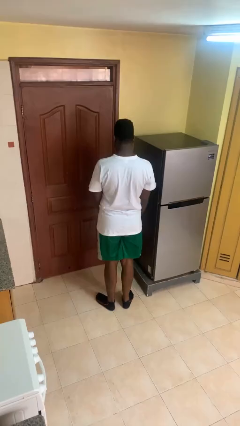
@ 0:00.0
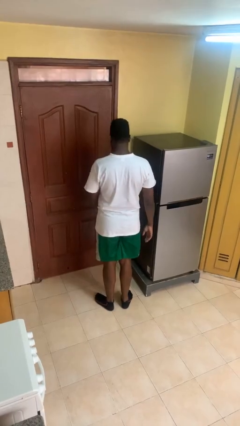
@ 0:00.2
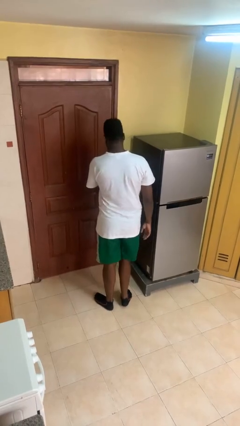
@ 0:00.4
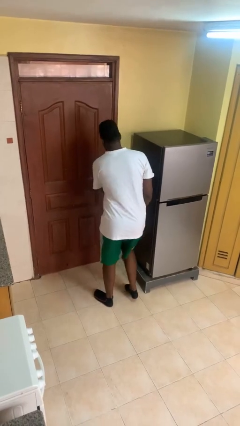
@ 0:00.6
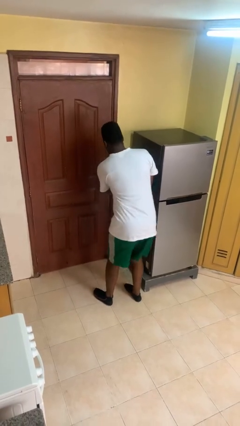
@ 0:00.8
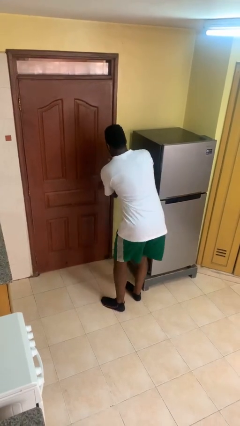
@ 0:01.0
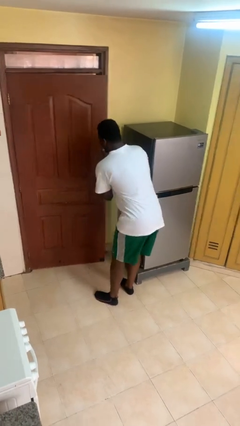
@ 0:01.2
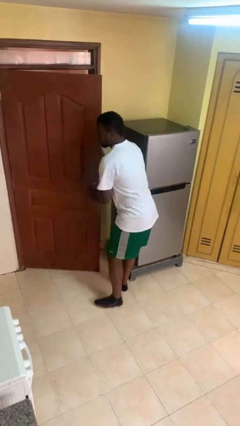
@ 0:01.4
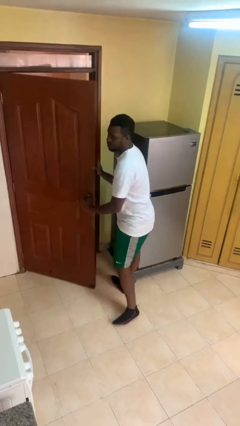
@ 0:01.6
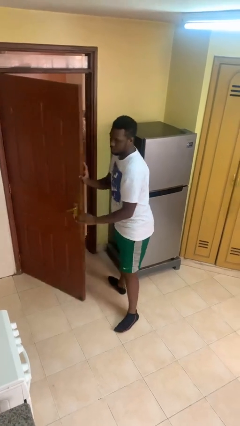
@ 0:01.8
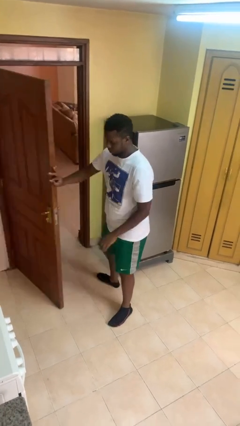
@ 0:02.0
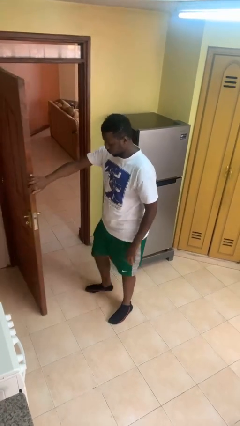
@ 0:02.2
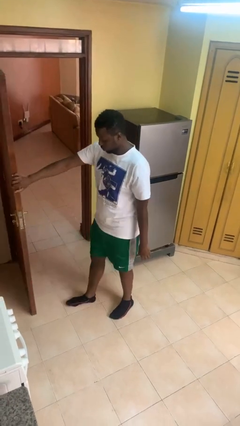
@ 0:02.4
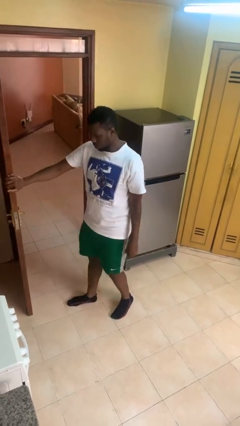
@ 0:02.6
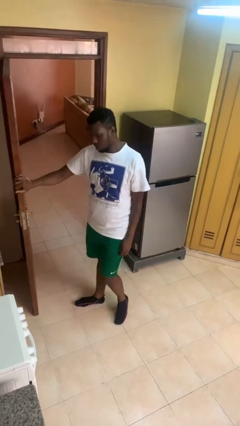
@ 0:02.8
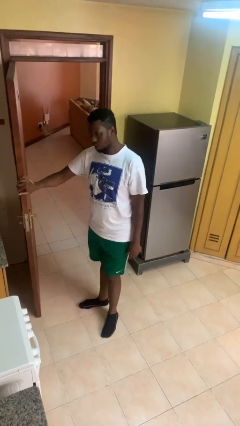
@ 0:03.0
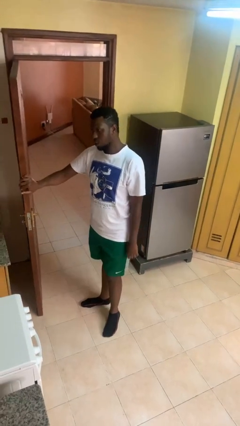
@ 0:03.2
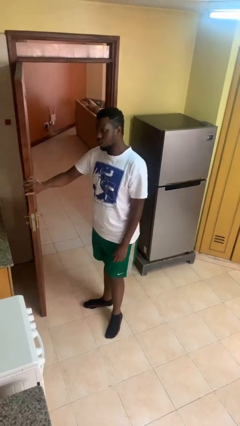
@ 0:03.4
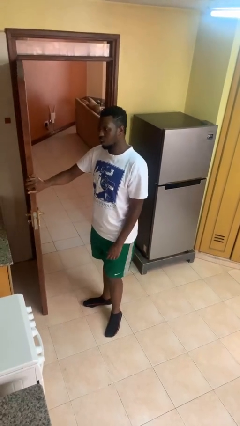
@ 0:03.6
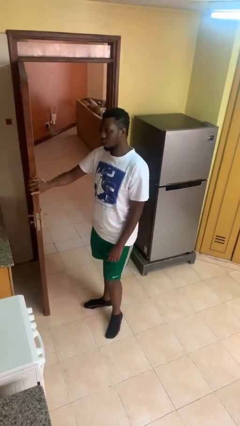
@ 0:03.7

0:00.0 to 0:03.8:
person opens facility door

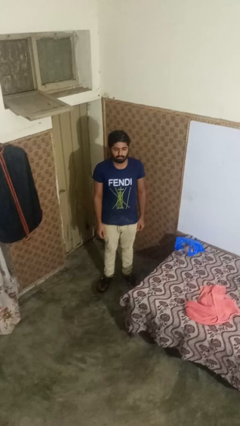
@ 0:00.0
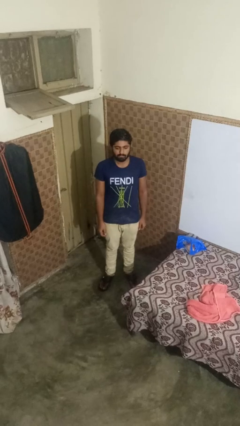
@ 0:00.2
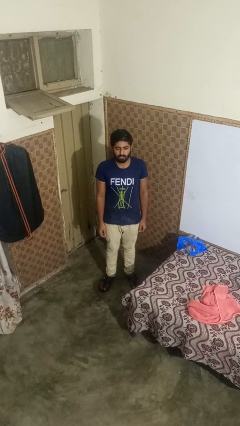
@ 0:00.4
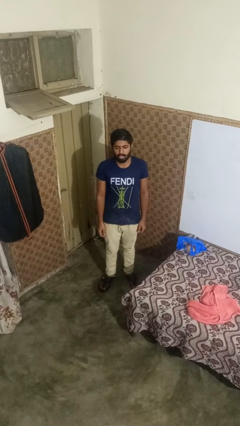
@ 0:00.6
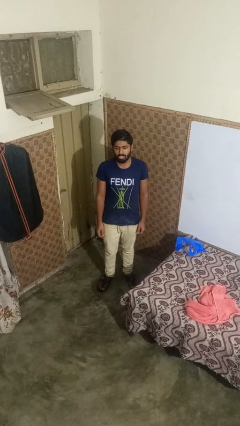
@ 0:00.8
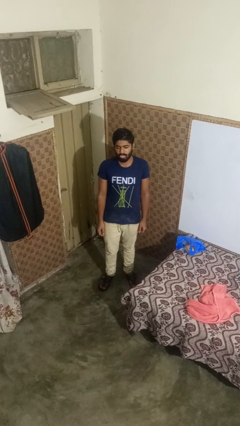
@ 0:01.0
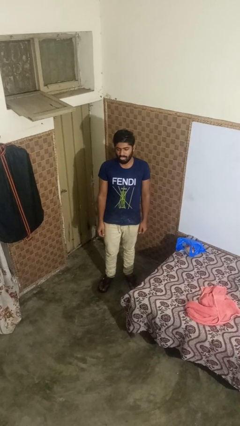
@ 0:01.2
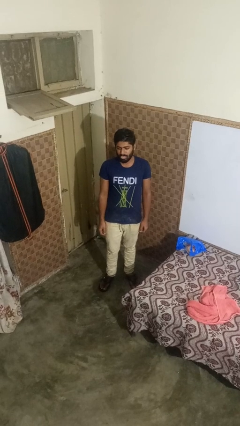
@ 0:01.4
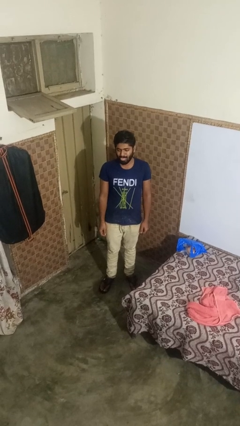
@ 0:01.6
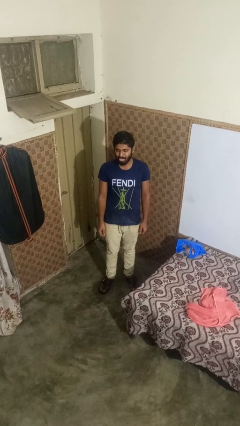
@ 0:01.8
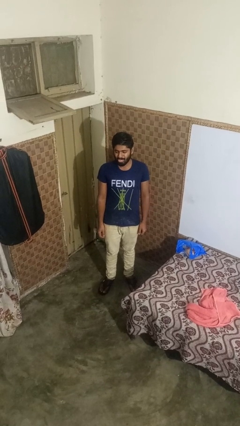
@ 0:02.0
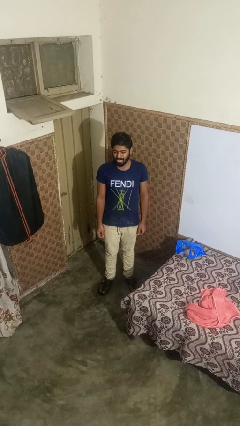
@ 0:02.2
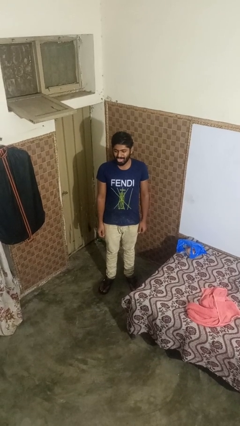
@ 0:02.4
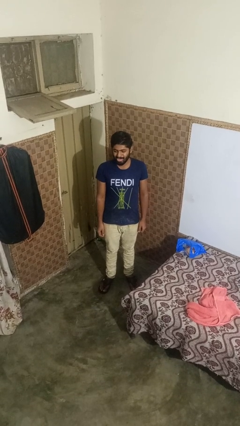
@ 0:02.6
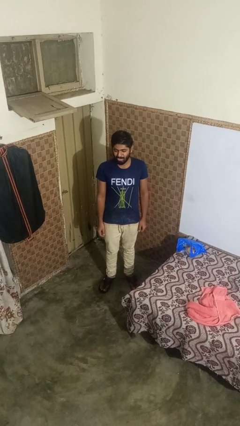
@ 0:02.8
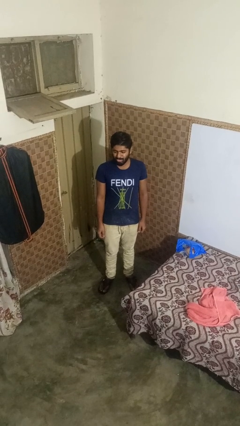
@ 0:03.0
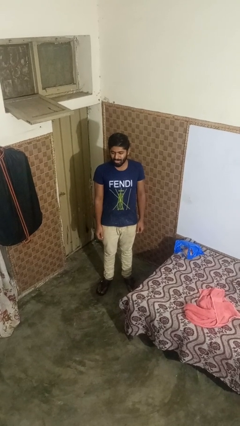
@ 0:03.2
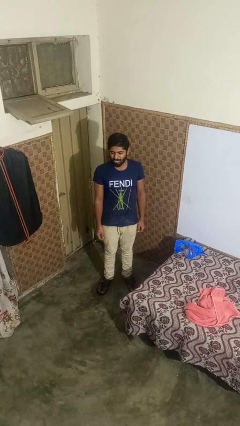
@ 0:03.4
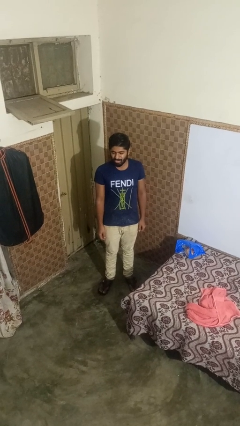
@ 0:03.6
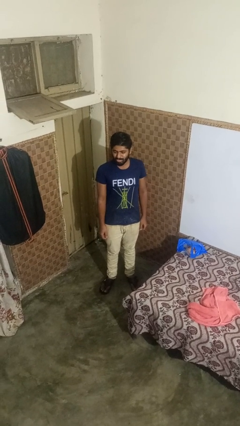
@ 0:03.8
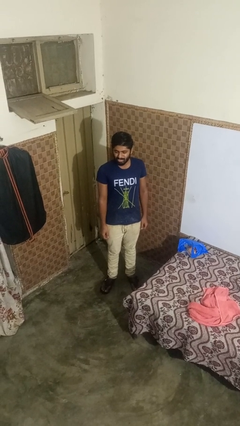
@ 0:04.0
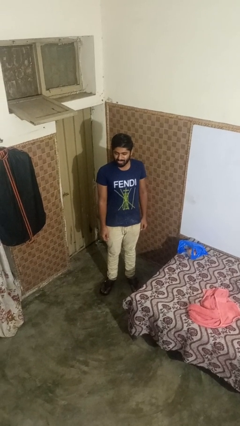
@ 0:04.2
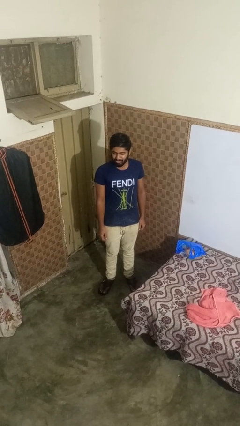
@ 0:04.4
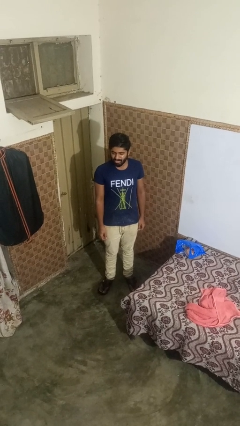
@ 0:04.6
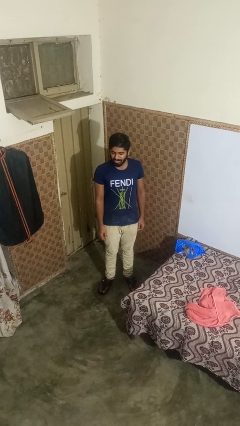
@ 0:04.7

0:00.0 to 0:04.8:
person sticks out tongue

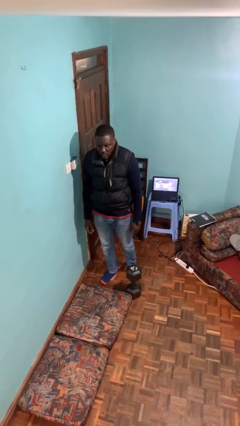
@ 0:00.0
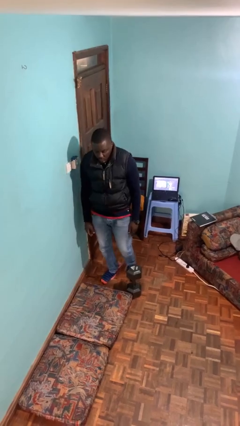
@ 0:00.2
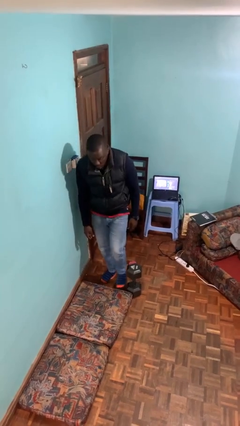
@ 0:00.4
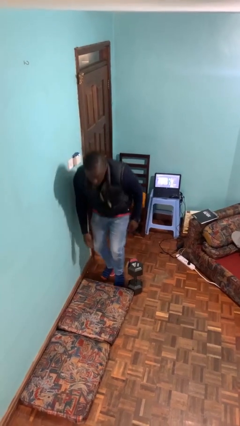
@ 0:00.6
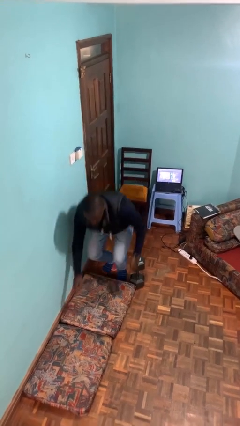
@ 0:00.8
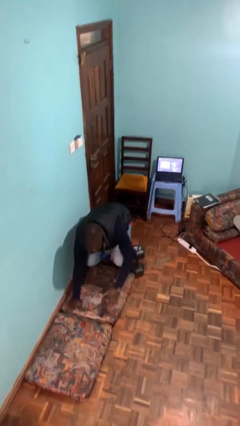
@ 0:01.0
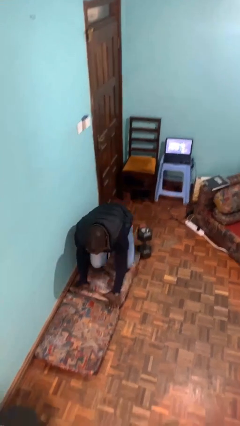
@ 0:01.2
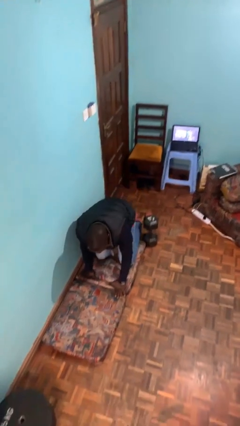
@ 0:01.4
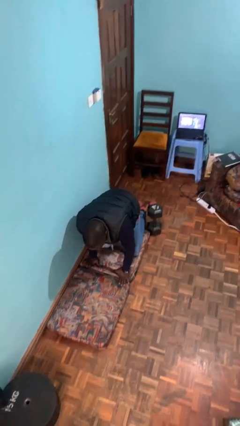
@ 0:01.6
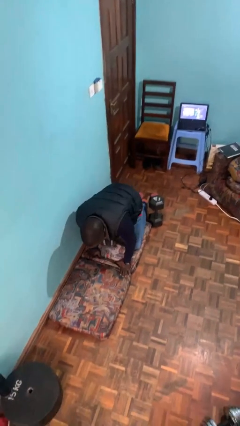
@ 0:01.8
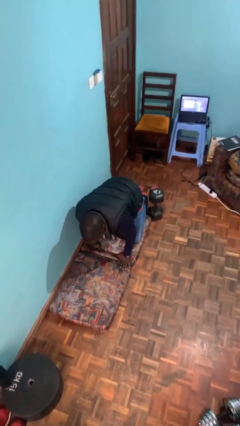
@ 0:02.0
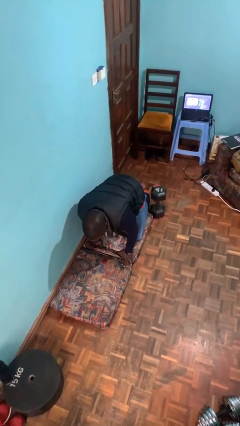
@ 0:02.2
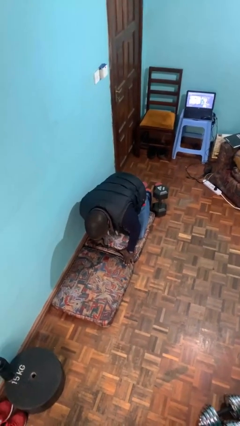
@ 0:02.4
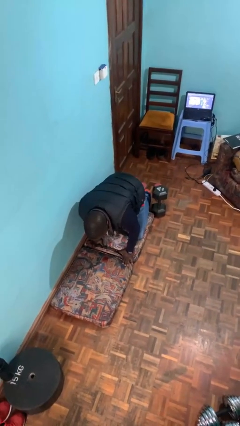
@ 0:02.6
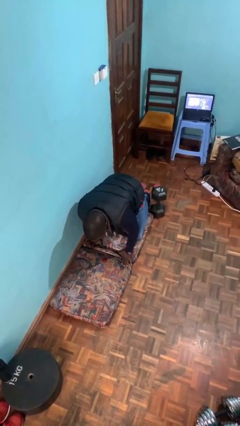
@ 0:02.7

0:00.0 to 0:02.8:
person trips on object on floor

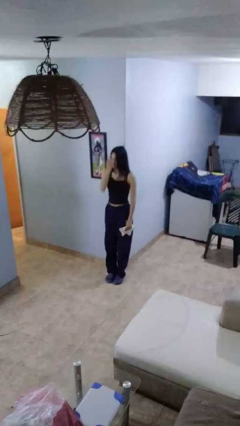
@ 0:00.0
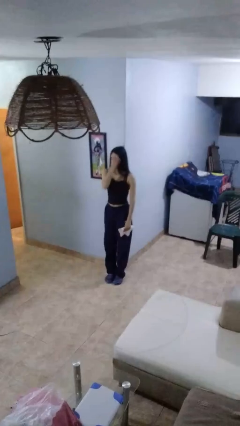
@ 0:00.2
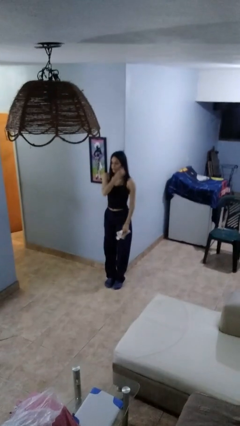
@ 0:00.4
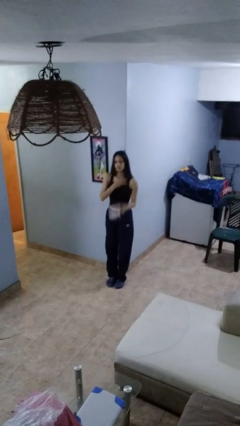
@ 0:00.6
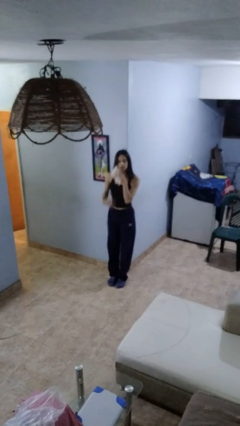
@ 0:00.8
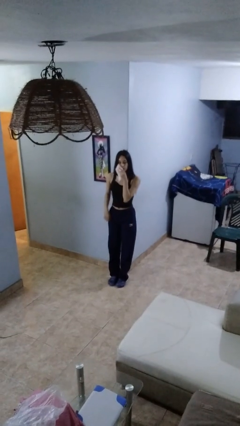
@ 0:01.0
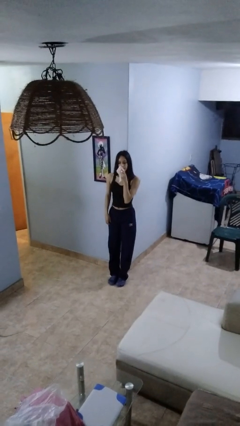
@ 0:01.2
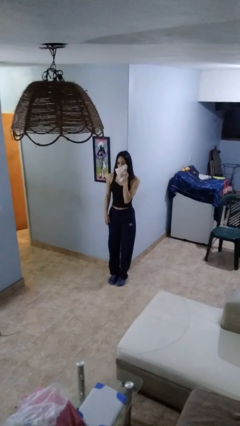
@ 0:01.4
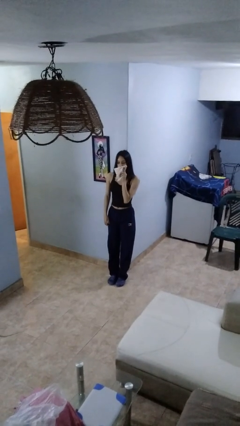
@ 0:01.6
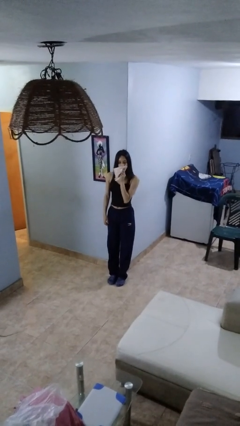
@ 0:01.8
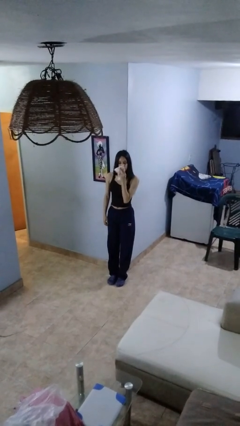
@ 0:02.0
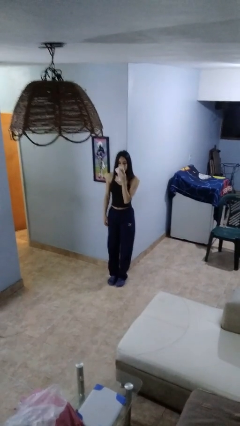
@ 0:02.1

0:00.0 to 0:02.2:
person wipes mouth with napkin

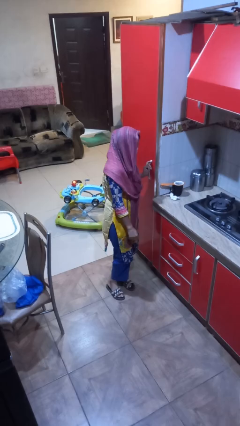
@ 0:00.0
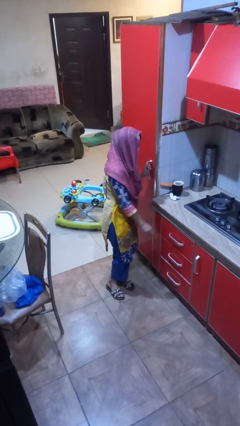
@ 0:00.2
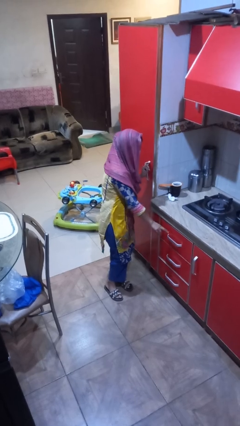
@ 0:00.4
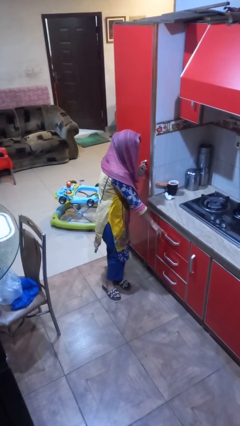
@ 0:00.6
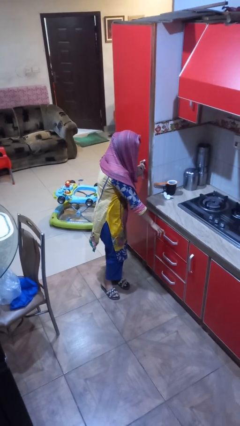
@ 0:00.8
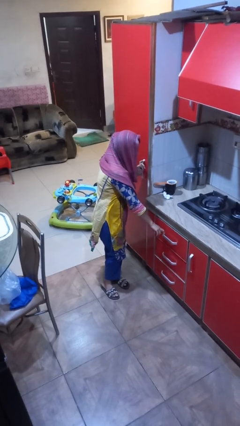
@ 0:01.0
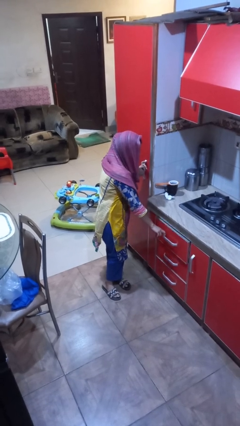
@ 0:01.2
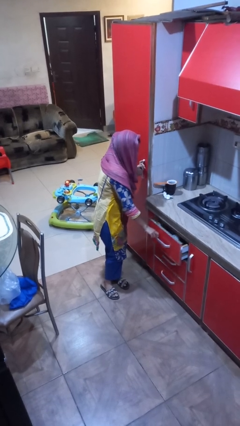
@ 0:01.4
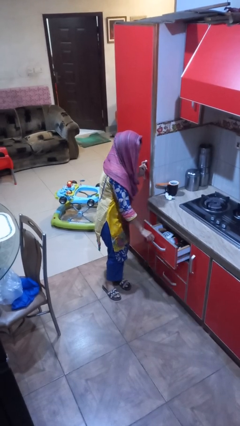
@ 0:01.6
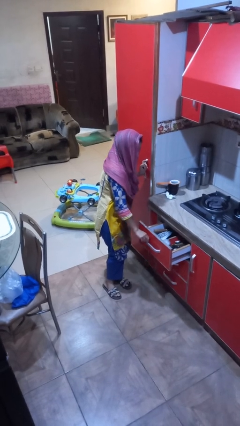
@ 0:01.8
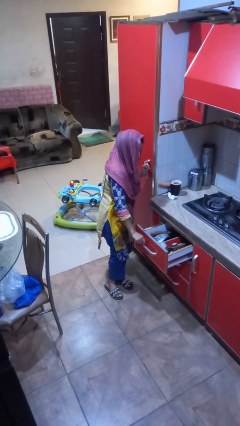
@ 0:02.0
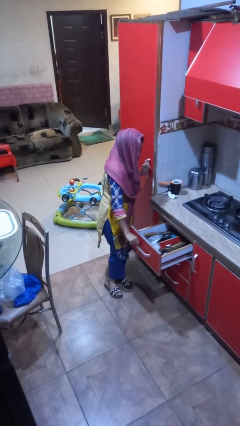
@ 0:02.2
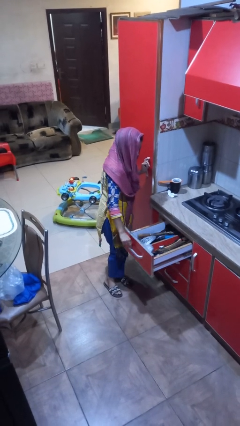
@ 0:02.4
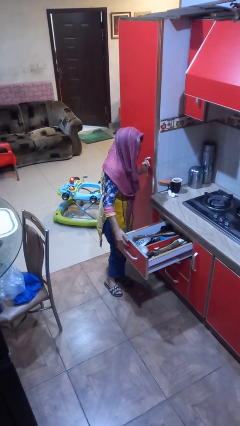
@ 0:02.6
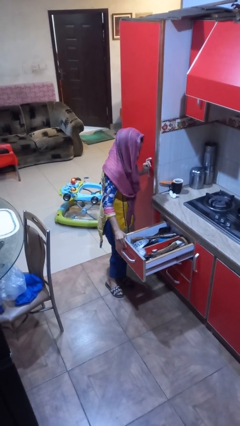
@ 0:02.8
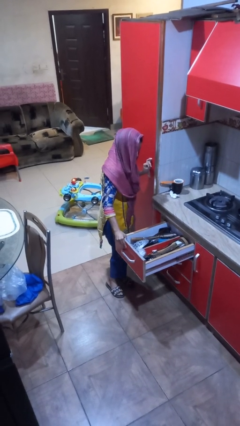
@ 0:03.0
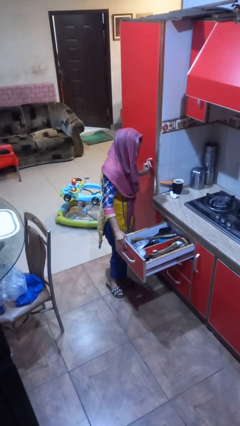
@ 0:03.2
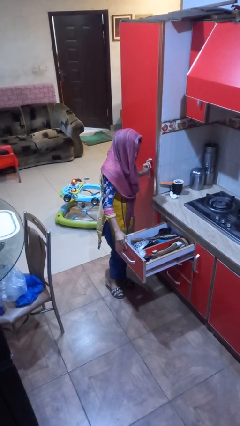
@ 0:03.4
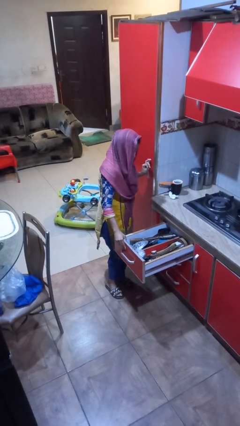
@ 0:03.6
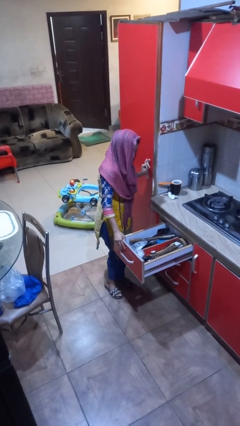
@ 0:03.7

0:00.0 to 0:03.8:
person opens kitchen drawer

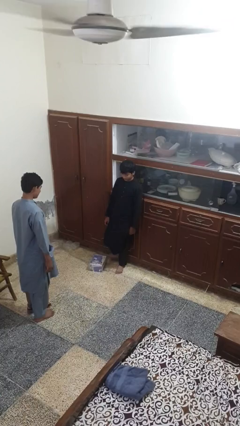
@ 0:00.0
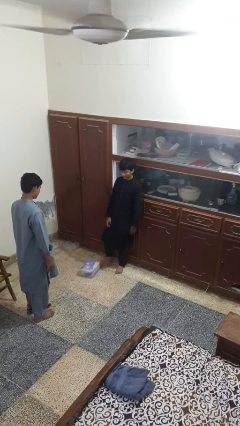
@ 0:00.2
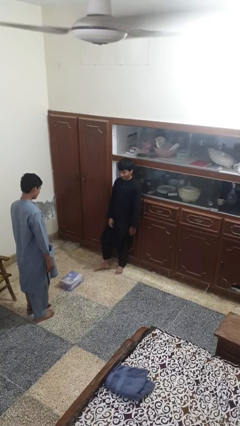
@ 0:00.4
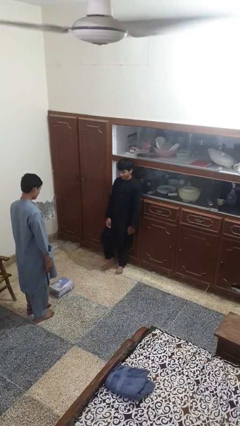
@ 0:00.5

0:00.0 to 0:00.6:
person kicks object to person
